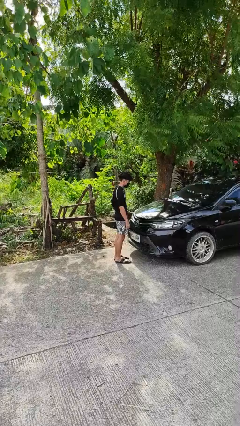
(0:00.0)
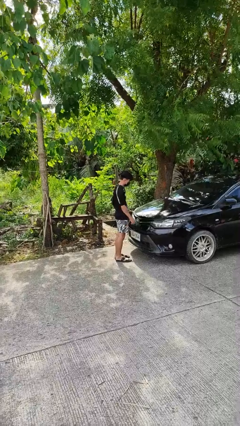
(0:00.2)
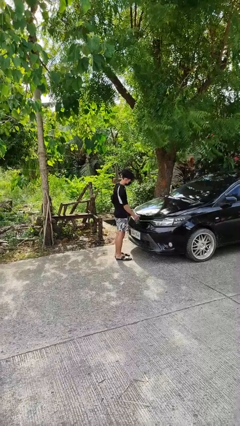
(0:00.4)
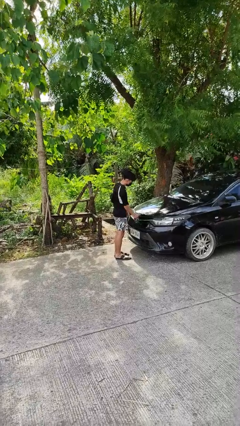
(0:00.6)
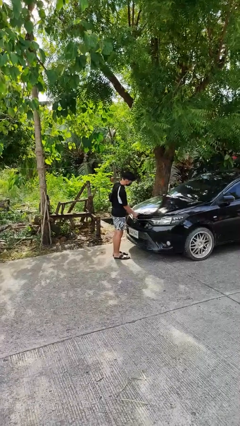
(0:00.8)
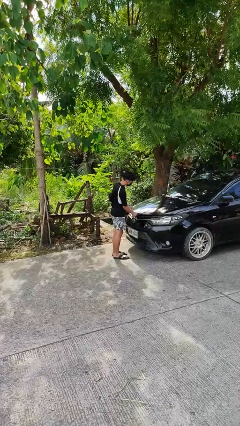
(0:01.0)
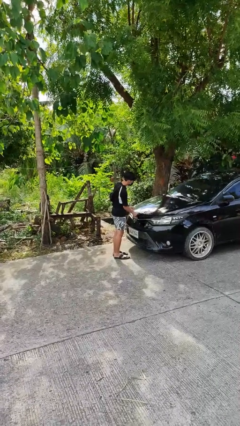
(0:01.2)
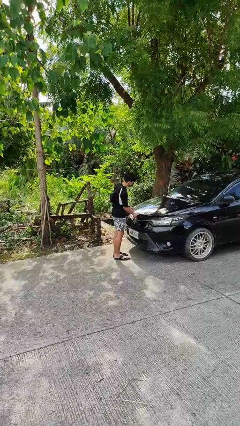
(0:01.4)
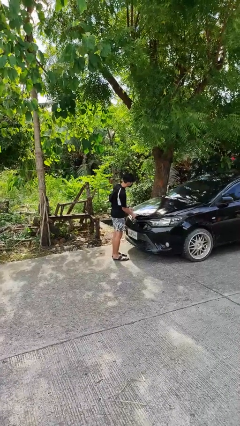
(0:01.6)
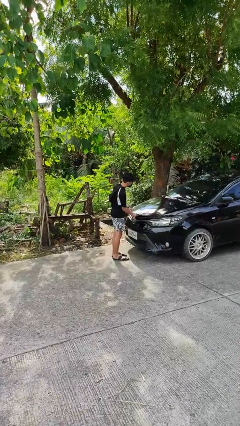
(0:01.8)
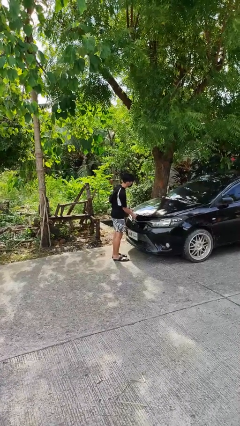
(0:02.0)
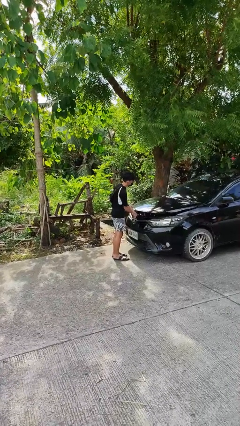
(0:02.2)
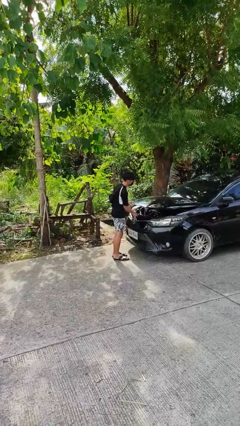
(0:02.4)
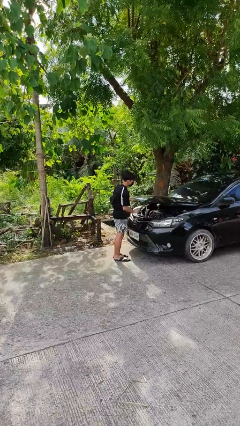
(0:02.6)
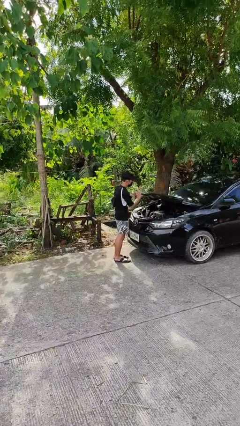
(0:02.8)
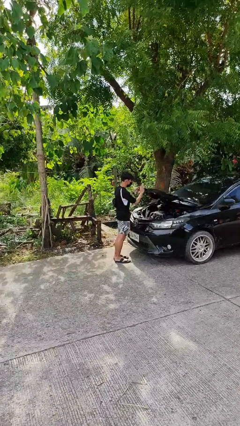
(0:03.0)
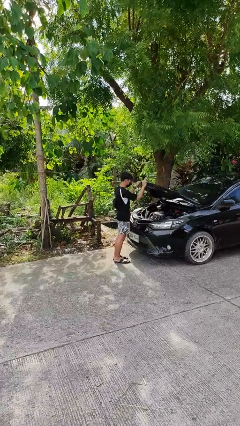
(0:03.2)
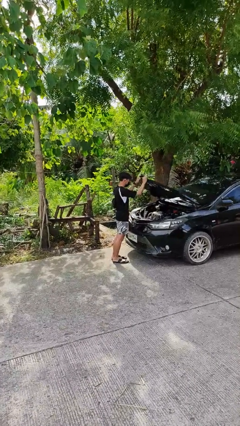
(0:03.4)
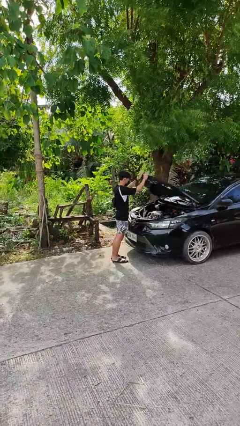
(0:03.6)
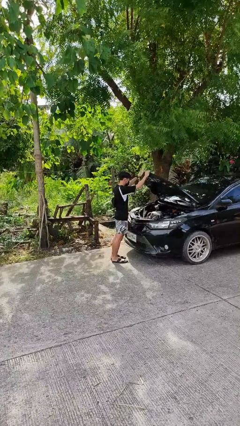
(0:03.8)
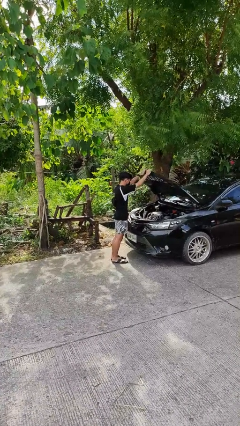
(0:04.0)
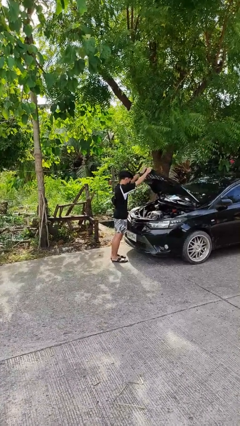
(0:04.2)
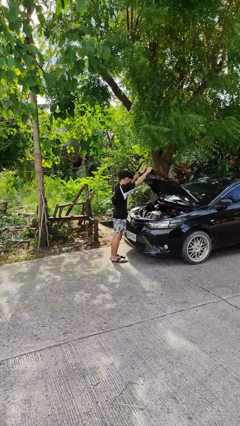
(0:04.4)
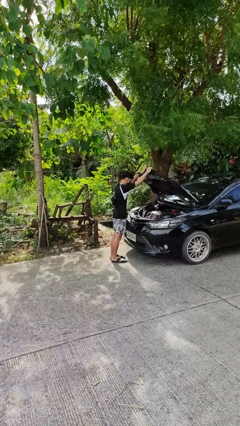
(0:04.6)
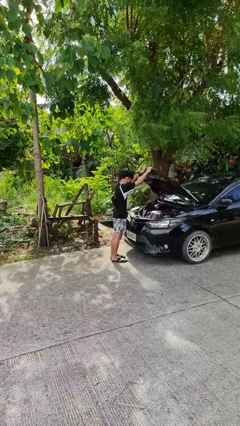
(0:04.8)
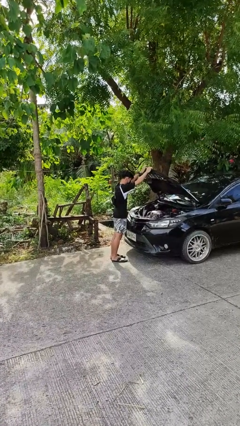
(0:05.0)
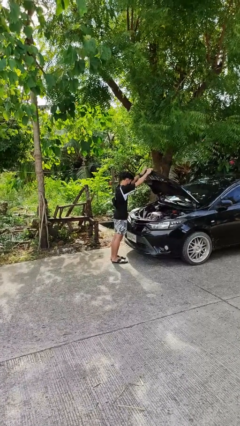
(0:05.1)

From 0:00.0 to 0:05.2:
person opens car hood

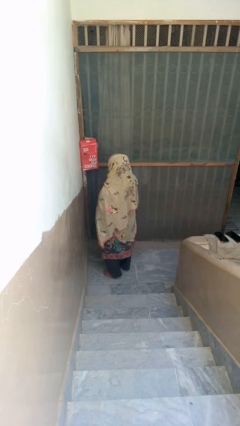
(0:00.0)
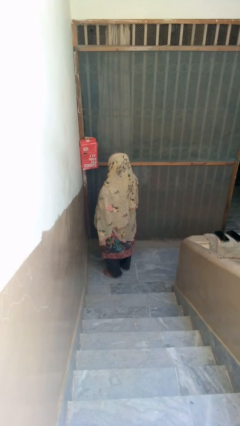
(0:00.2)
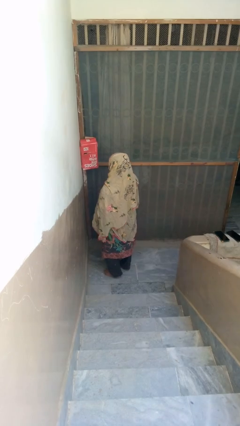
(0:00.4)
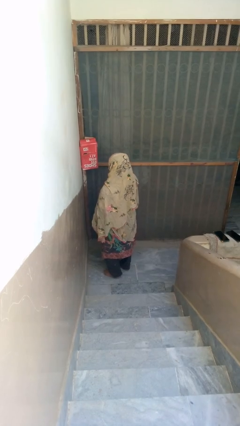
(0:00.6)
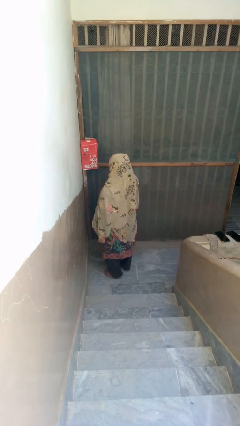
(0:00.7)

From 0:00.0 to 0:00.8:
person closes mailbox

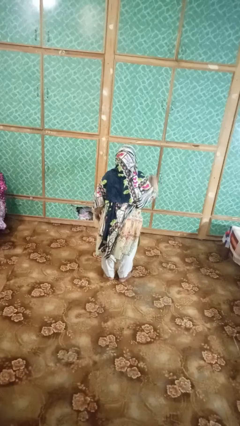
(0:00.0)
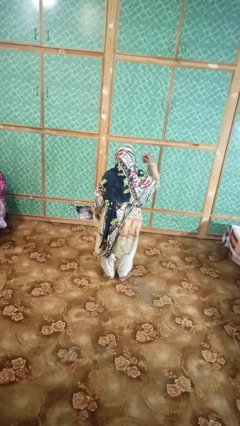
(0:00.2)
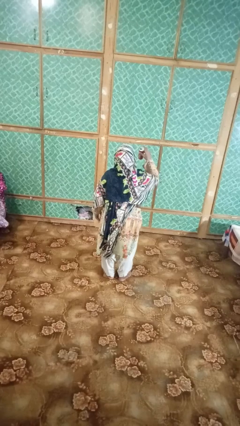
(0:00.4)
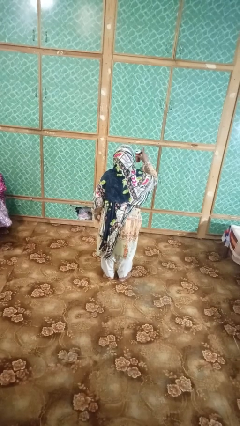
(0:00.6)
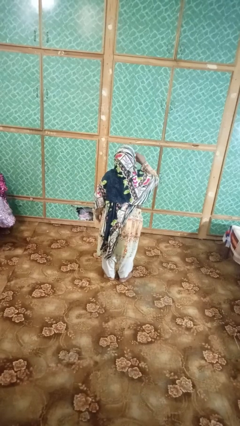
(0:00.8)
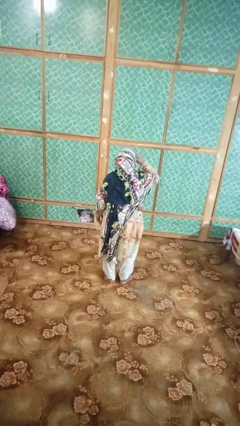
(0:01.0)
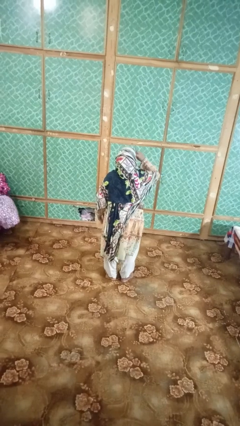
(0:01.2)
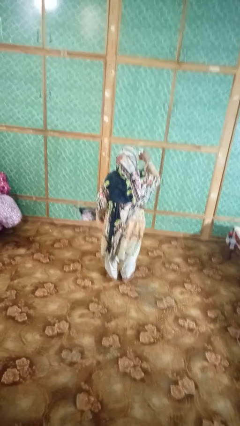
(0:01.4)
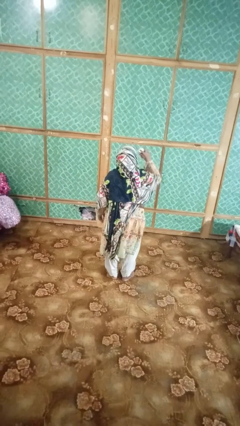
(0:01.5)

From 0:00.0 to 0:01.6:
person opens beverage can

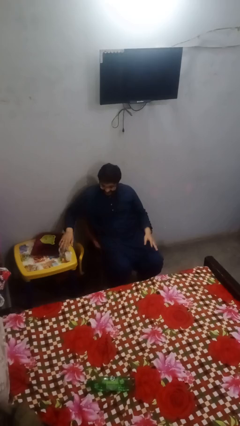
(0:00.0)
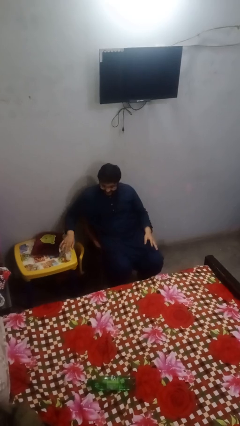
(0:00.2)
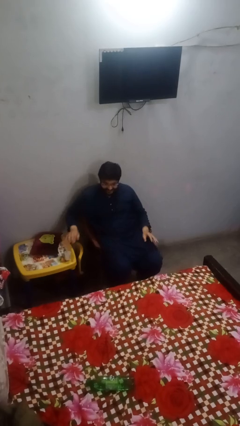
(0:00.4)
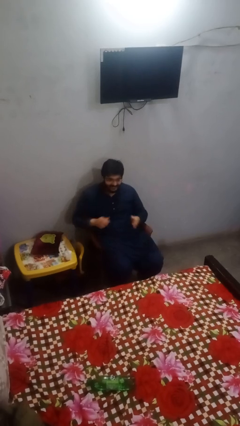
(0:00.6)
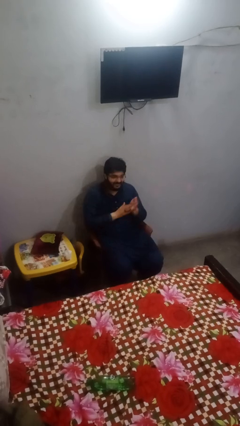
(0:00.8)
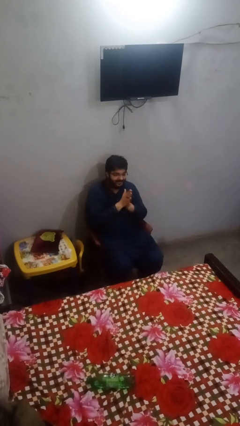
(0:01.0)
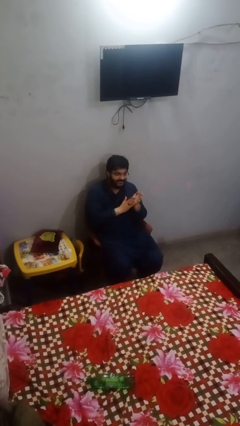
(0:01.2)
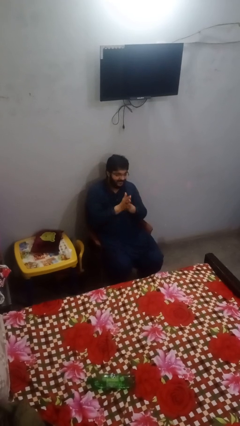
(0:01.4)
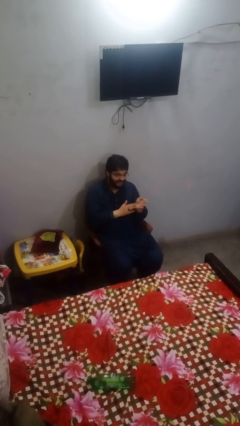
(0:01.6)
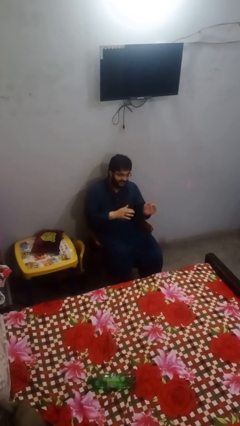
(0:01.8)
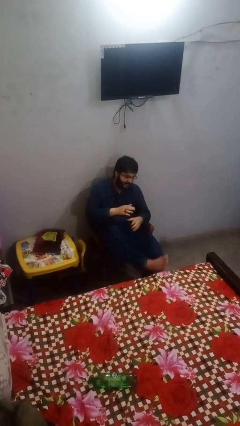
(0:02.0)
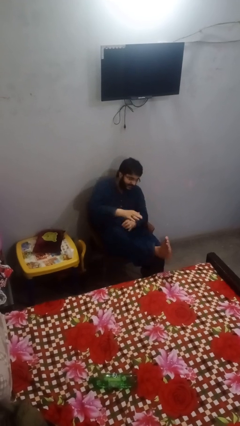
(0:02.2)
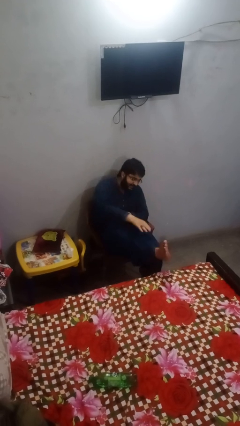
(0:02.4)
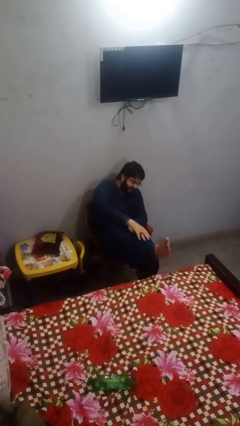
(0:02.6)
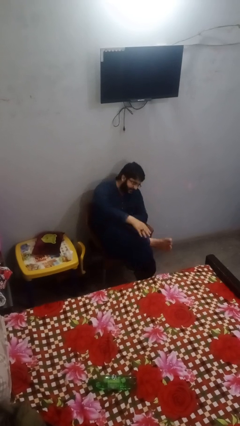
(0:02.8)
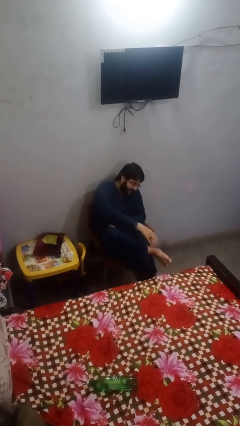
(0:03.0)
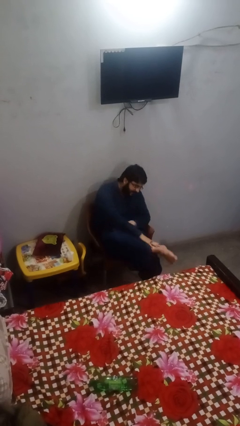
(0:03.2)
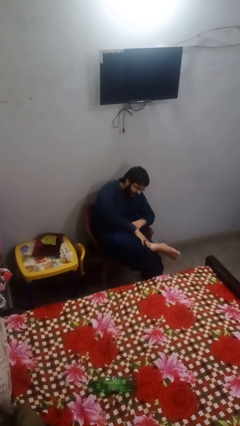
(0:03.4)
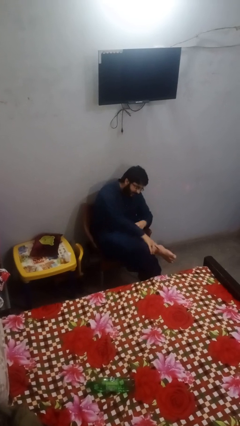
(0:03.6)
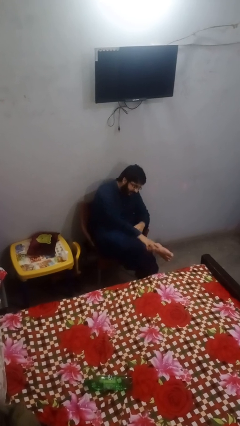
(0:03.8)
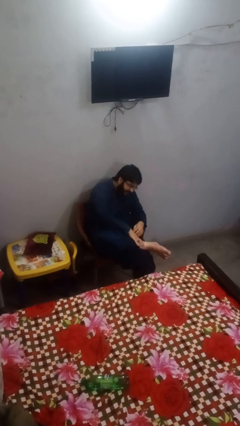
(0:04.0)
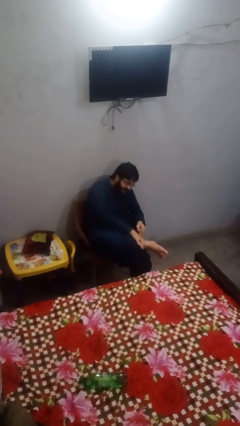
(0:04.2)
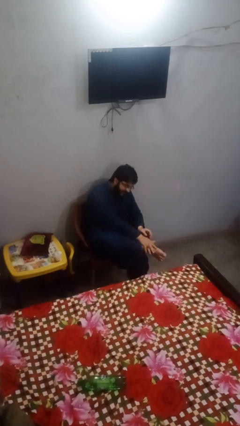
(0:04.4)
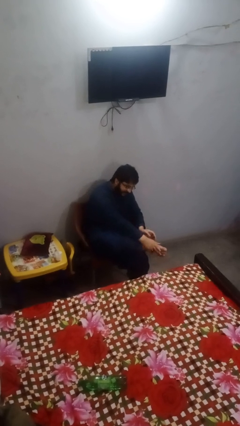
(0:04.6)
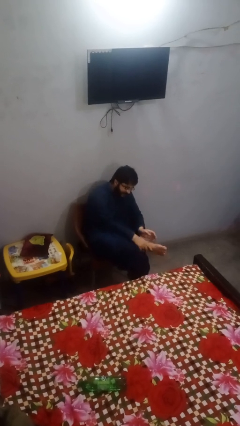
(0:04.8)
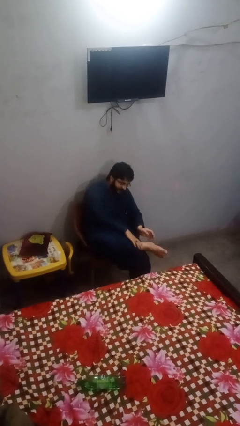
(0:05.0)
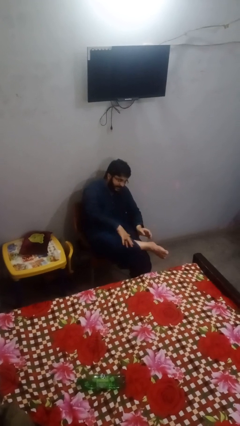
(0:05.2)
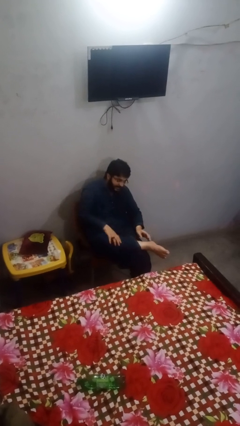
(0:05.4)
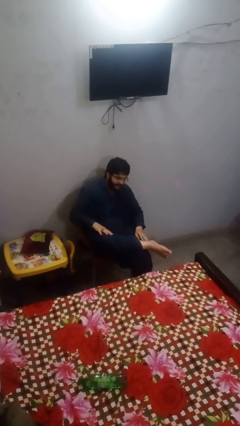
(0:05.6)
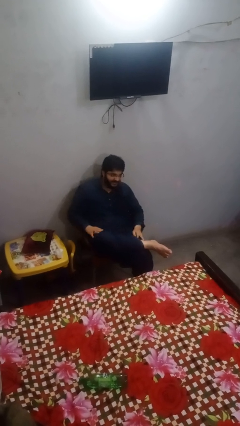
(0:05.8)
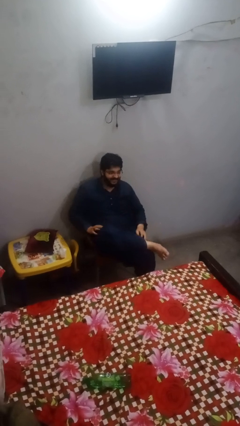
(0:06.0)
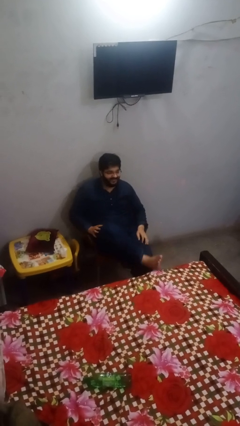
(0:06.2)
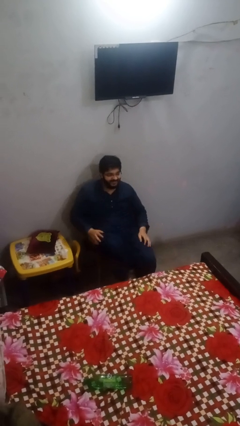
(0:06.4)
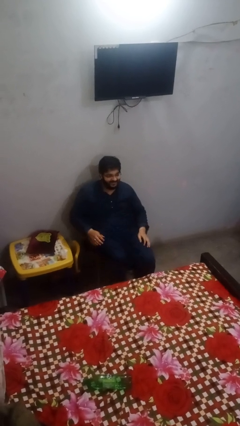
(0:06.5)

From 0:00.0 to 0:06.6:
person applies sunscreen

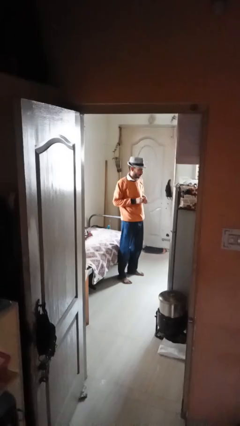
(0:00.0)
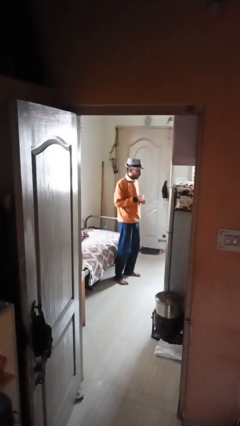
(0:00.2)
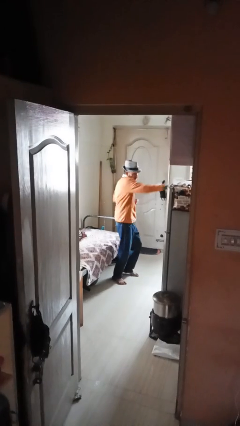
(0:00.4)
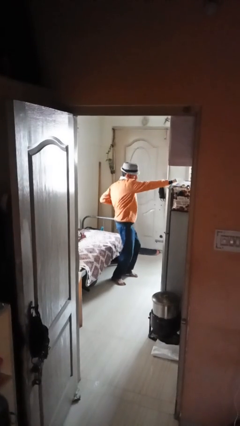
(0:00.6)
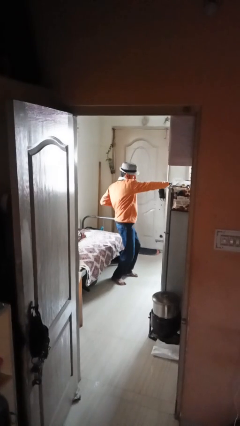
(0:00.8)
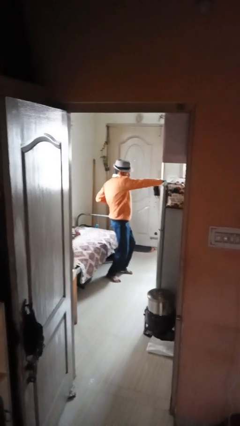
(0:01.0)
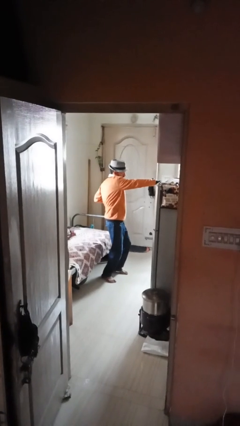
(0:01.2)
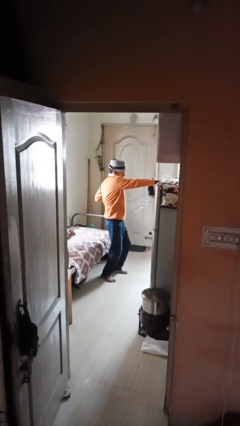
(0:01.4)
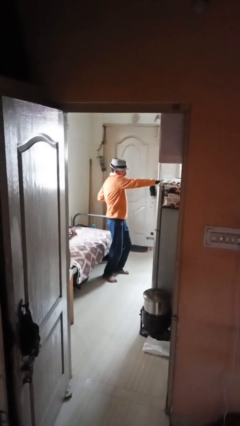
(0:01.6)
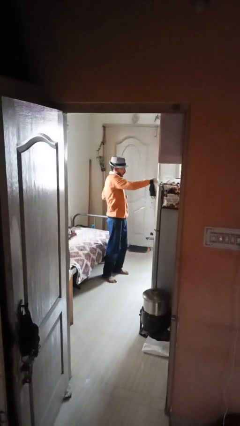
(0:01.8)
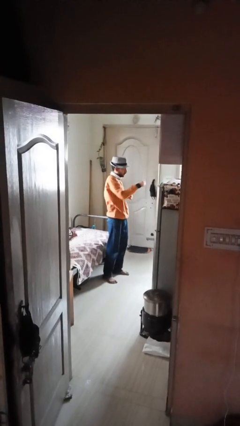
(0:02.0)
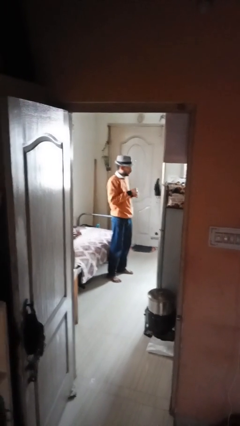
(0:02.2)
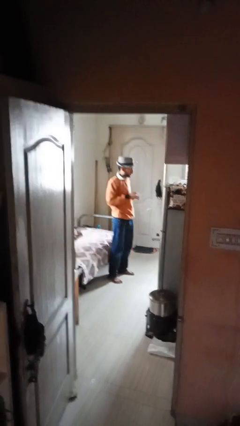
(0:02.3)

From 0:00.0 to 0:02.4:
person punches

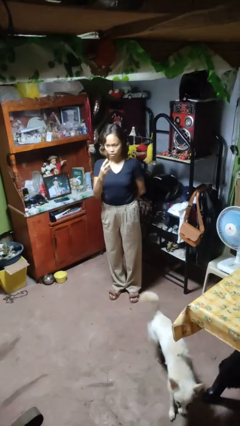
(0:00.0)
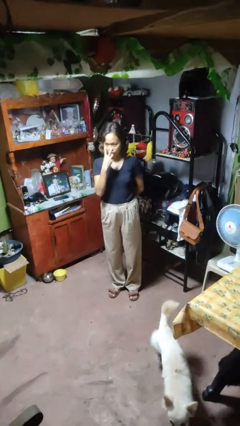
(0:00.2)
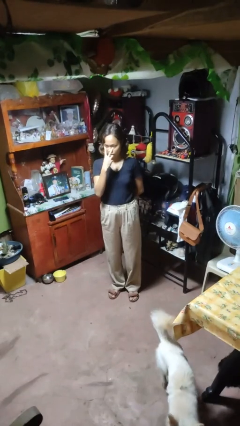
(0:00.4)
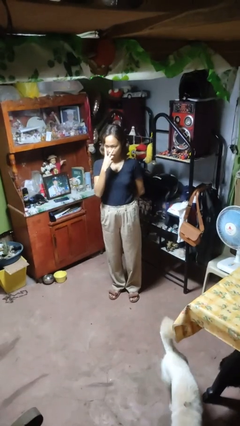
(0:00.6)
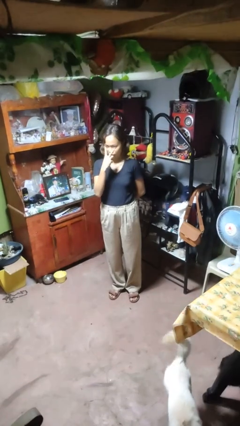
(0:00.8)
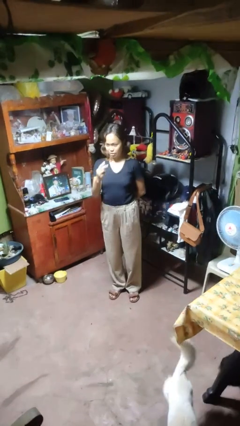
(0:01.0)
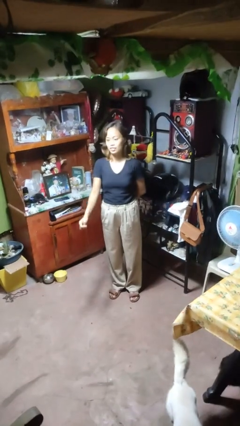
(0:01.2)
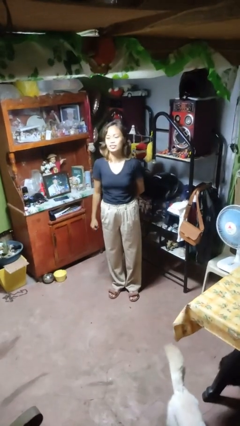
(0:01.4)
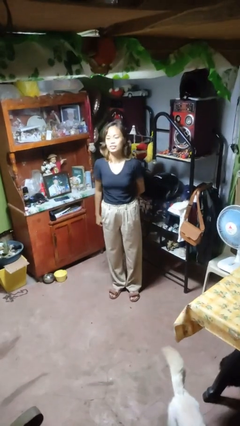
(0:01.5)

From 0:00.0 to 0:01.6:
person gestures watch closely
